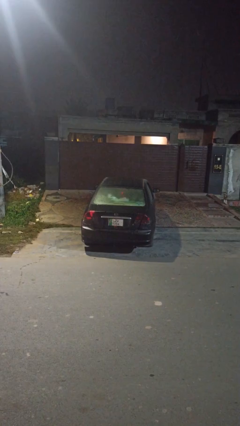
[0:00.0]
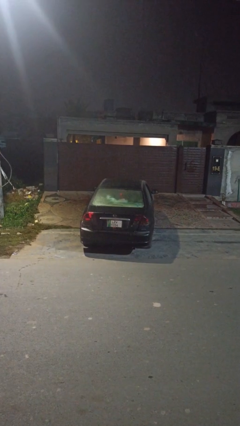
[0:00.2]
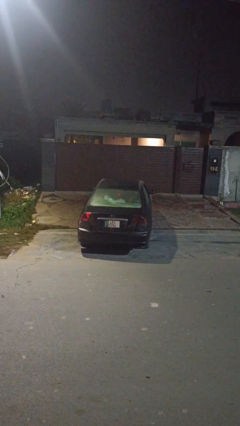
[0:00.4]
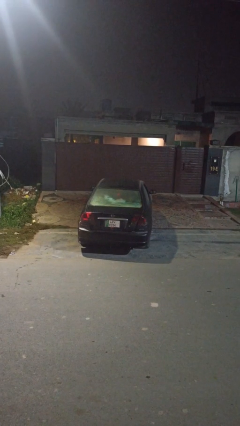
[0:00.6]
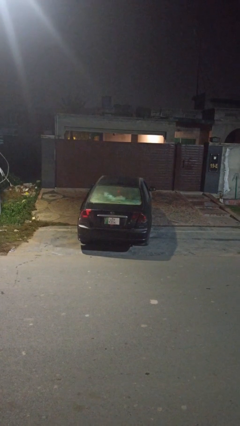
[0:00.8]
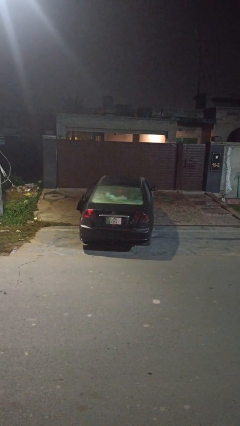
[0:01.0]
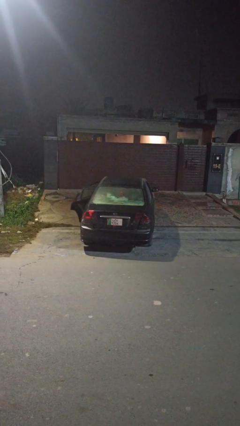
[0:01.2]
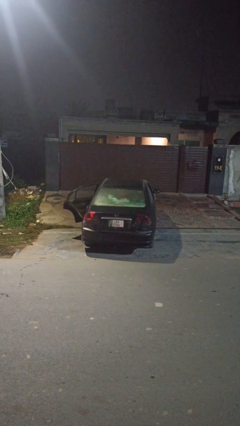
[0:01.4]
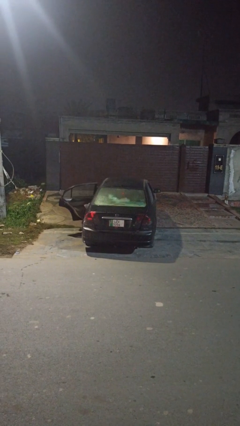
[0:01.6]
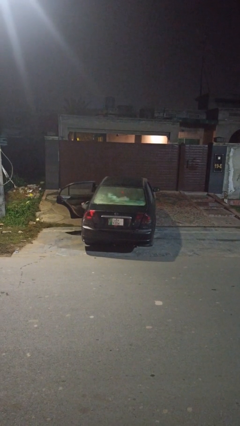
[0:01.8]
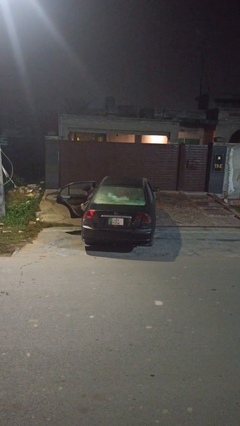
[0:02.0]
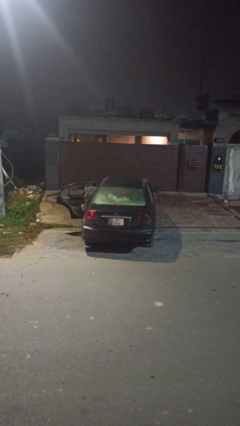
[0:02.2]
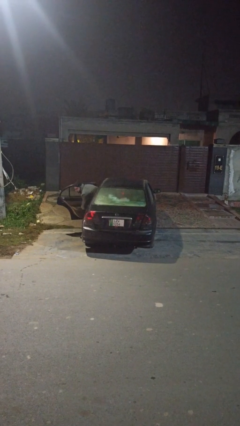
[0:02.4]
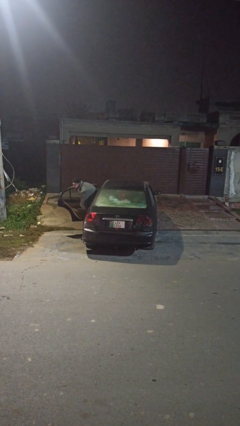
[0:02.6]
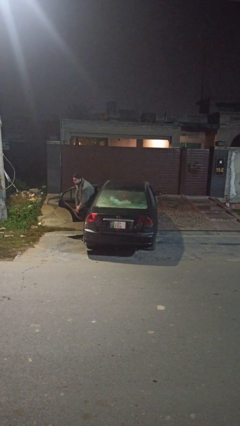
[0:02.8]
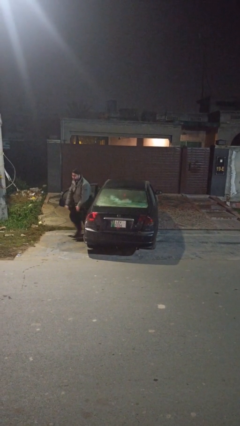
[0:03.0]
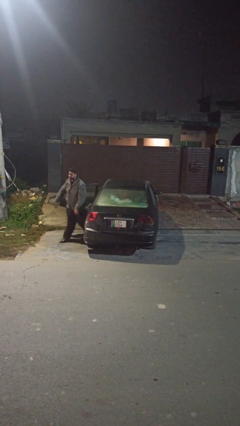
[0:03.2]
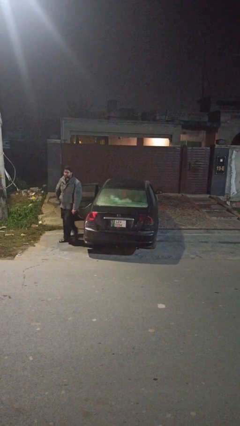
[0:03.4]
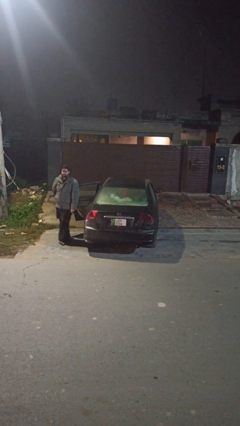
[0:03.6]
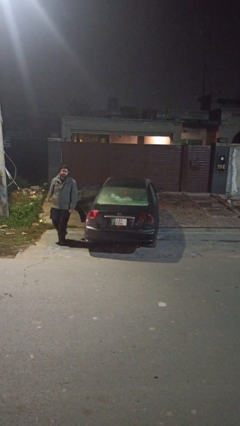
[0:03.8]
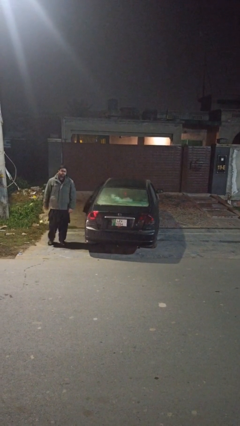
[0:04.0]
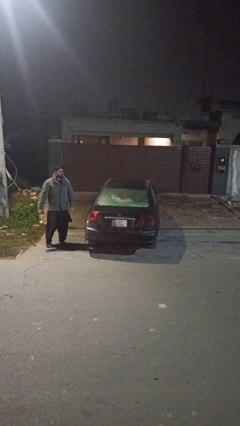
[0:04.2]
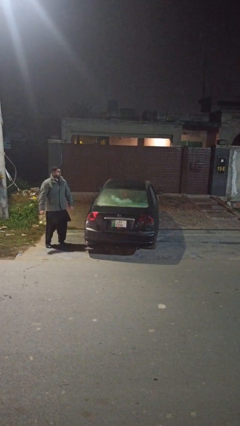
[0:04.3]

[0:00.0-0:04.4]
car drops off person

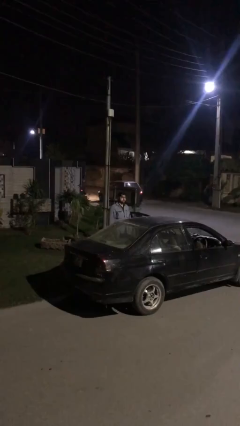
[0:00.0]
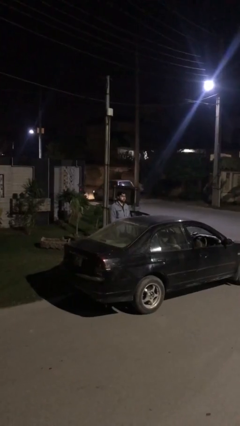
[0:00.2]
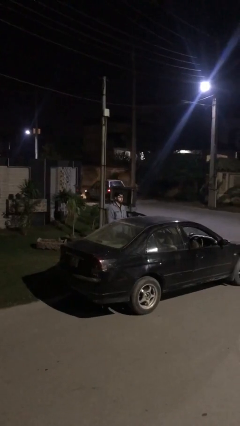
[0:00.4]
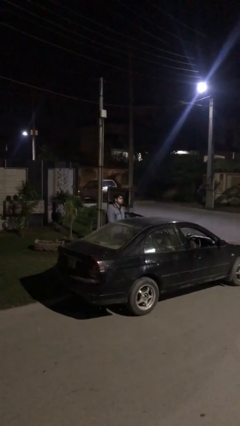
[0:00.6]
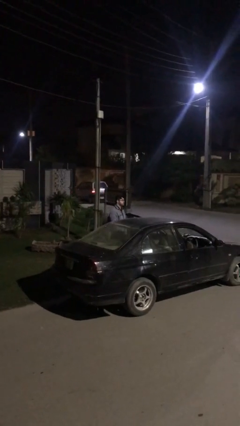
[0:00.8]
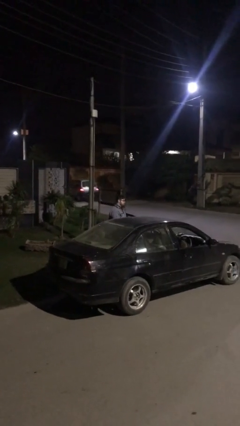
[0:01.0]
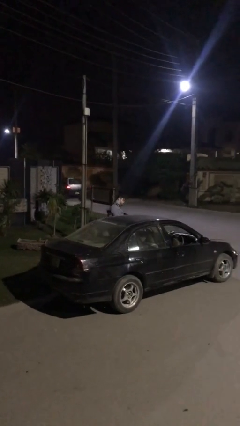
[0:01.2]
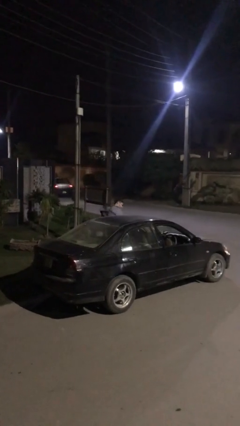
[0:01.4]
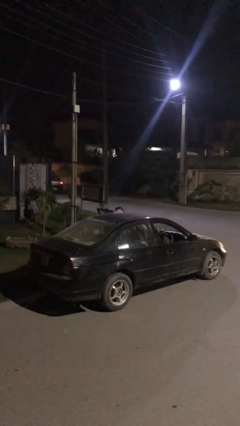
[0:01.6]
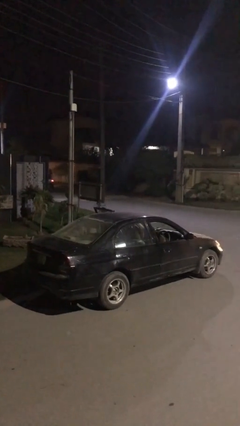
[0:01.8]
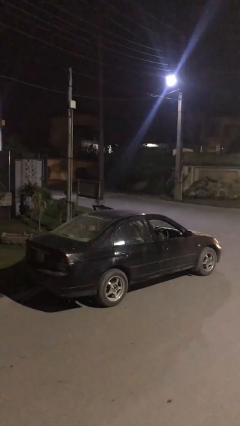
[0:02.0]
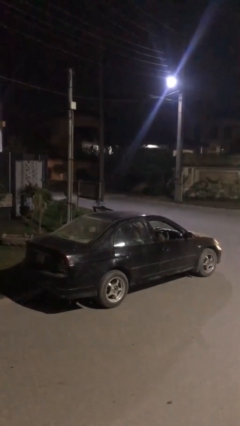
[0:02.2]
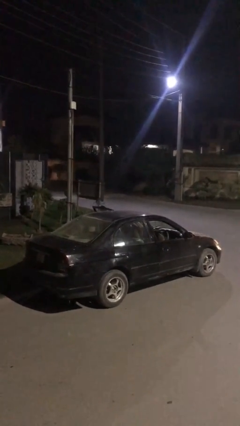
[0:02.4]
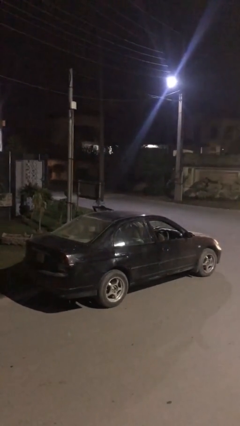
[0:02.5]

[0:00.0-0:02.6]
person enters car

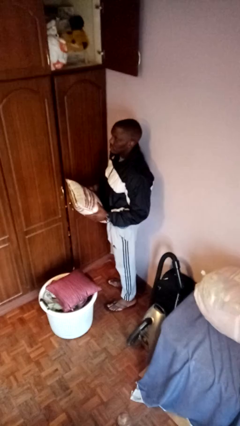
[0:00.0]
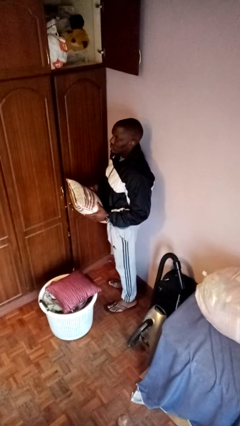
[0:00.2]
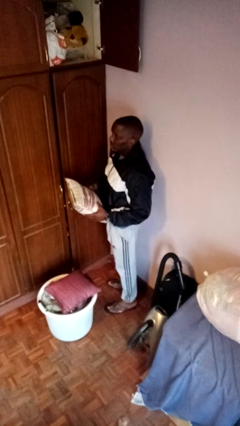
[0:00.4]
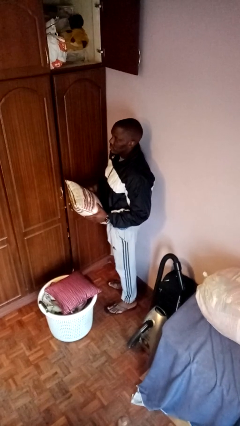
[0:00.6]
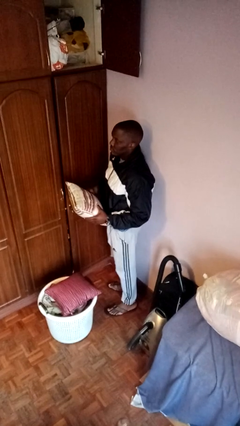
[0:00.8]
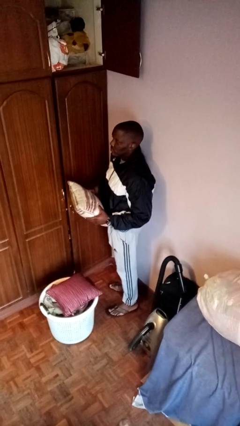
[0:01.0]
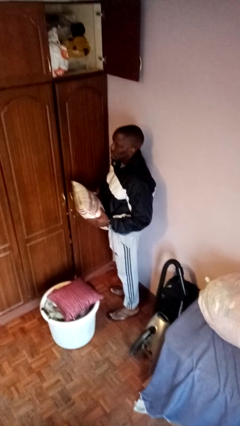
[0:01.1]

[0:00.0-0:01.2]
person picks up object from shelf

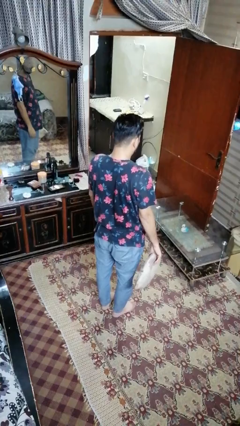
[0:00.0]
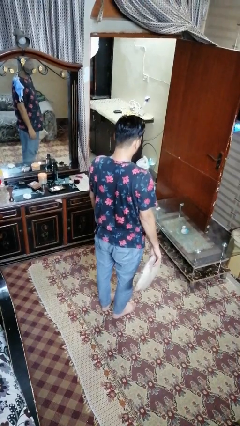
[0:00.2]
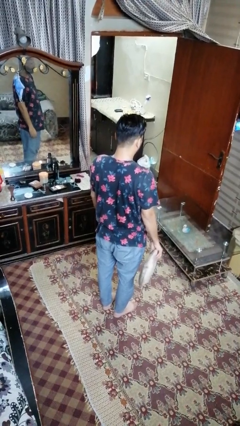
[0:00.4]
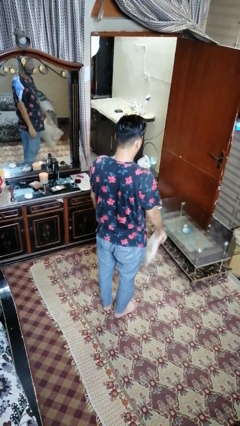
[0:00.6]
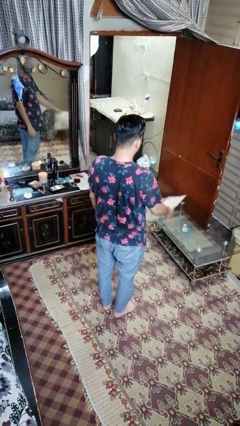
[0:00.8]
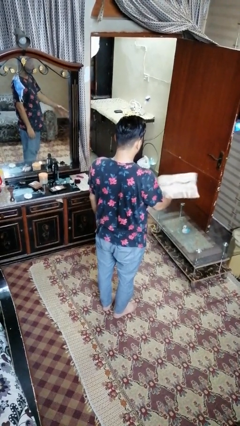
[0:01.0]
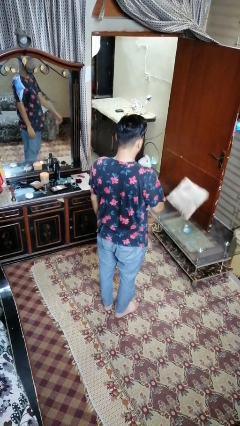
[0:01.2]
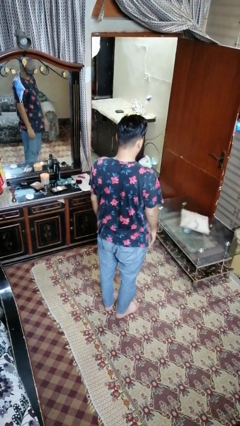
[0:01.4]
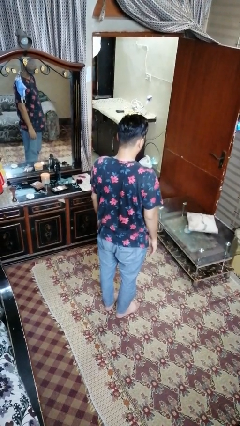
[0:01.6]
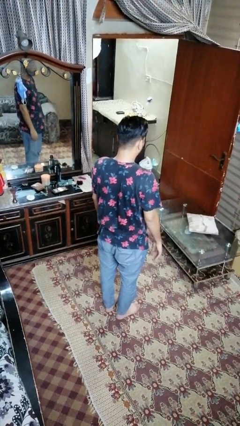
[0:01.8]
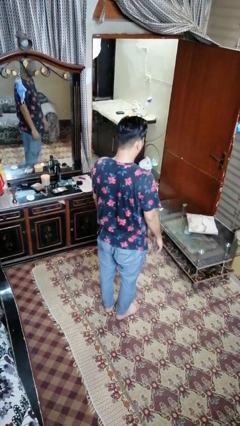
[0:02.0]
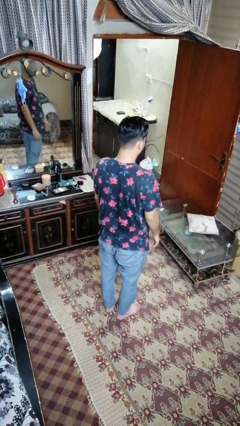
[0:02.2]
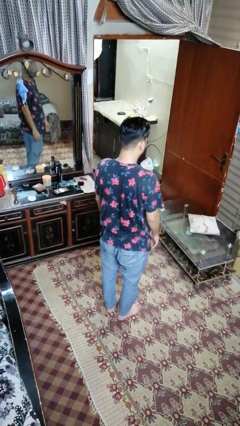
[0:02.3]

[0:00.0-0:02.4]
person throws object on table

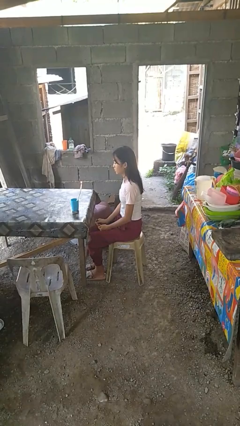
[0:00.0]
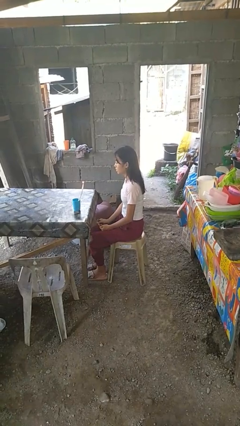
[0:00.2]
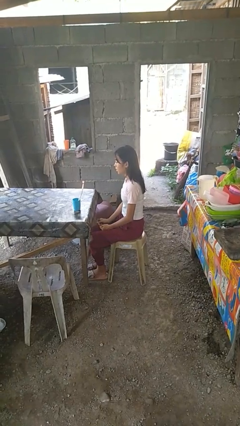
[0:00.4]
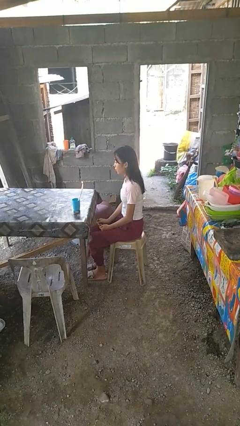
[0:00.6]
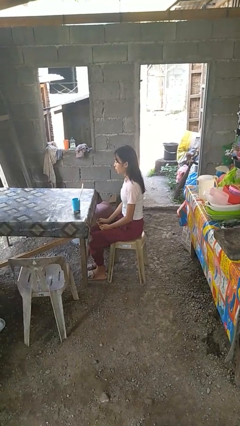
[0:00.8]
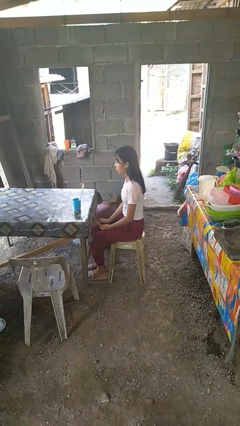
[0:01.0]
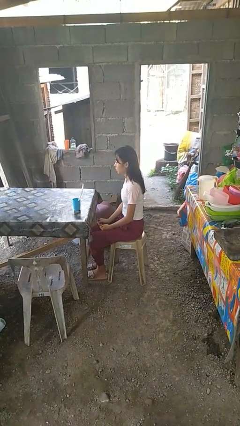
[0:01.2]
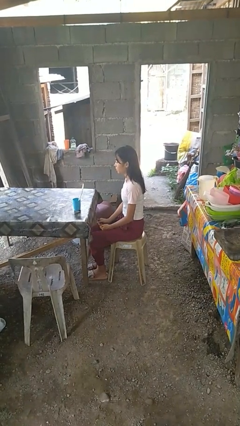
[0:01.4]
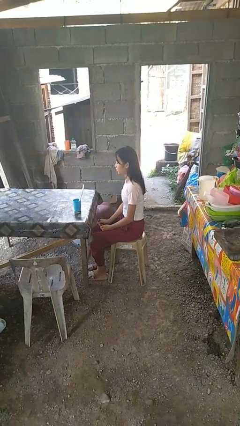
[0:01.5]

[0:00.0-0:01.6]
person extinguishes candle

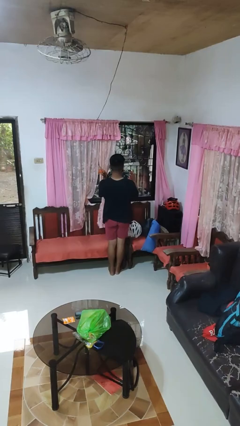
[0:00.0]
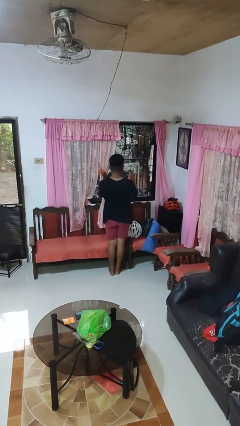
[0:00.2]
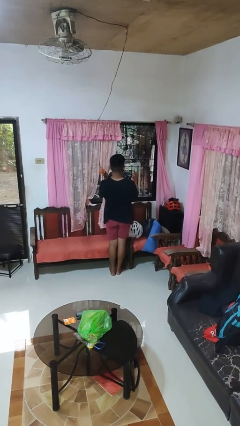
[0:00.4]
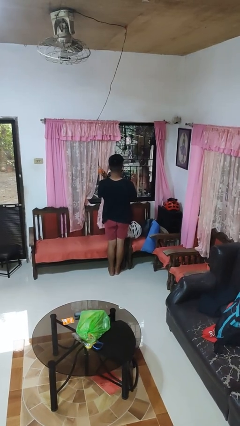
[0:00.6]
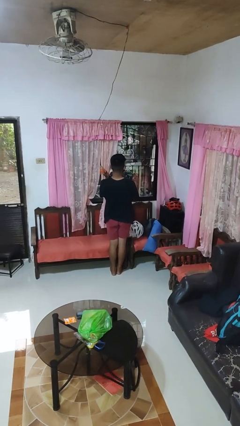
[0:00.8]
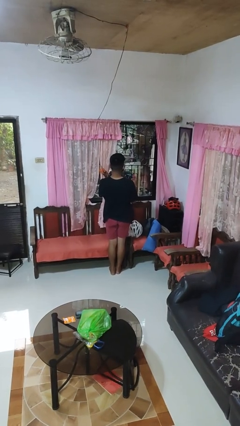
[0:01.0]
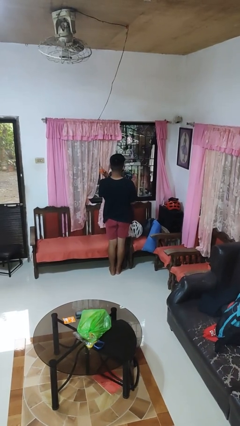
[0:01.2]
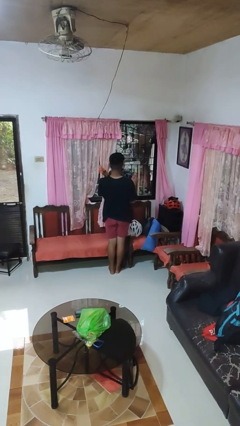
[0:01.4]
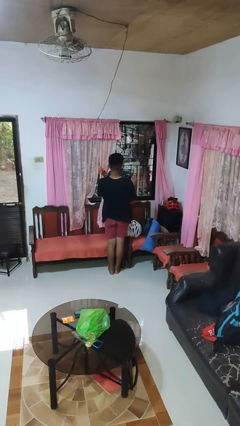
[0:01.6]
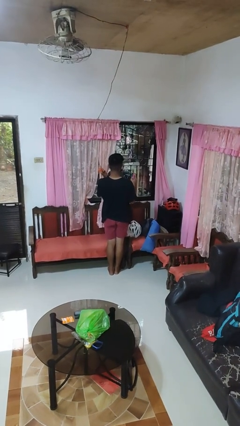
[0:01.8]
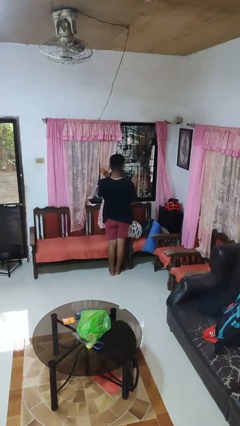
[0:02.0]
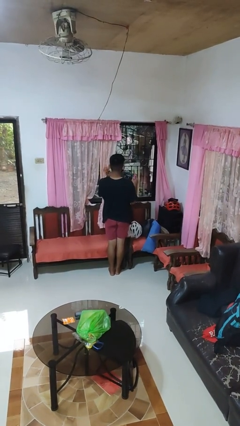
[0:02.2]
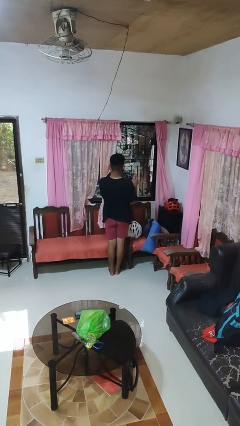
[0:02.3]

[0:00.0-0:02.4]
person sprays from bottle

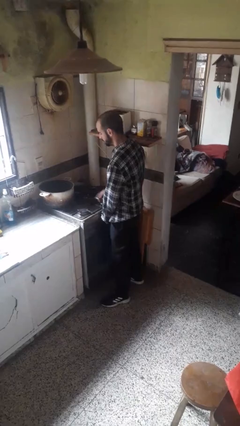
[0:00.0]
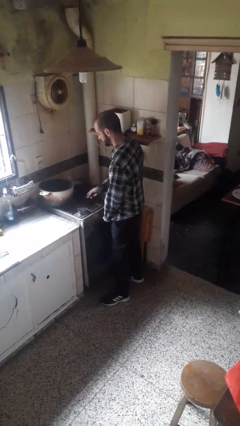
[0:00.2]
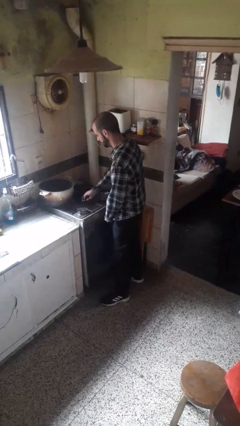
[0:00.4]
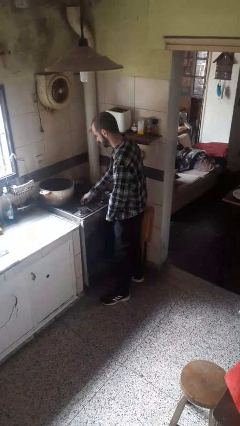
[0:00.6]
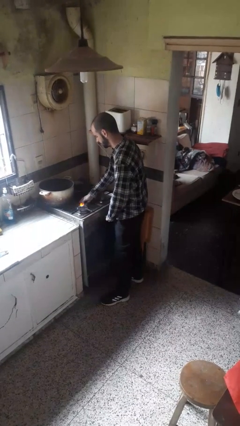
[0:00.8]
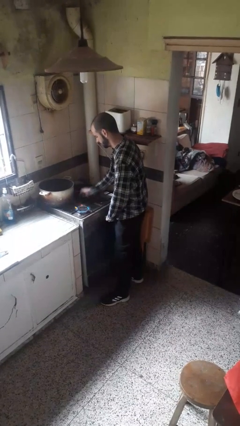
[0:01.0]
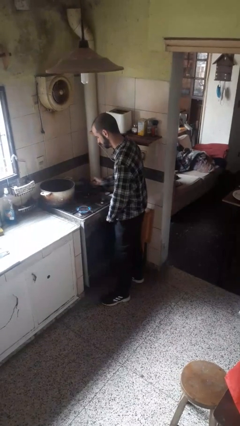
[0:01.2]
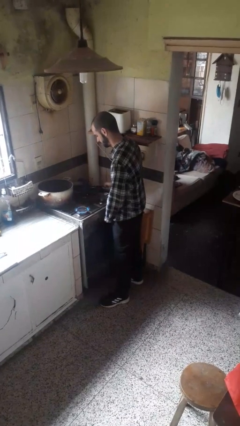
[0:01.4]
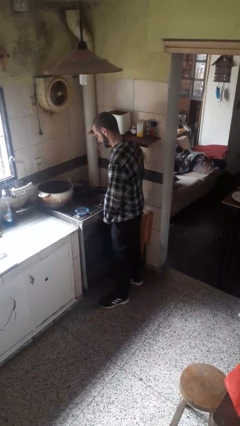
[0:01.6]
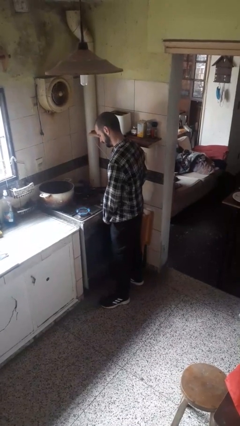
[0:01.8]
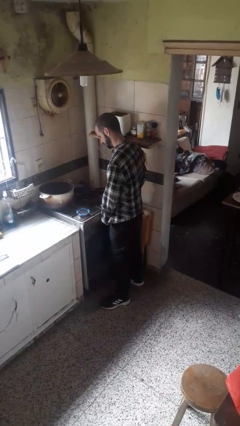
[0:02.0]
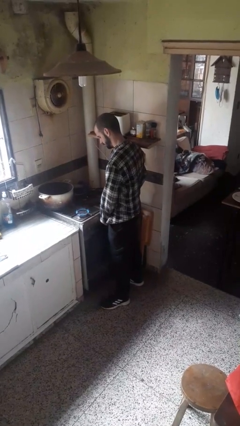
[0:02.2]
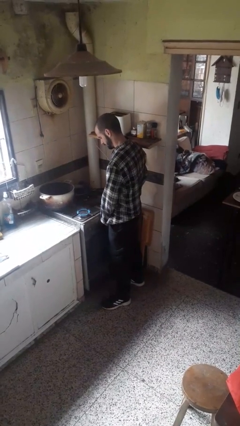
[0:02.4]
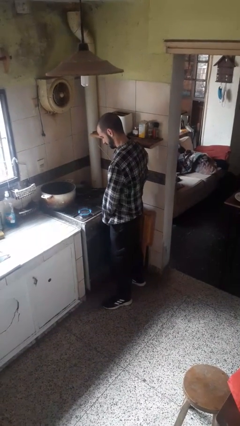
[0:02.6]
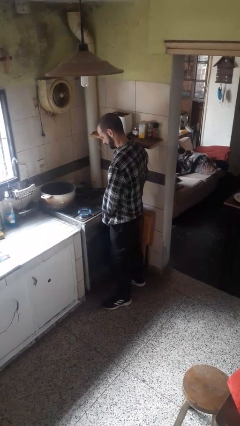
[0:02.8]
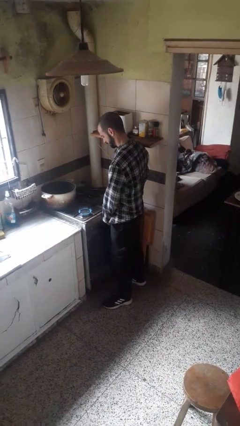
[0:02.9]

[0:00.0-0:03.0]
person turns on stovetop
